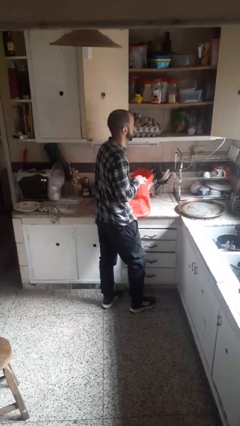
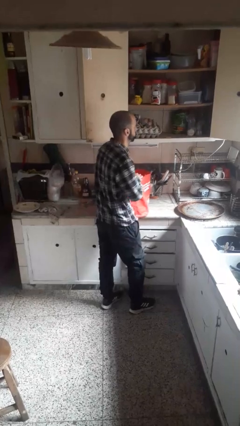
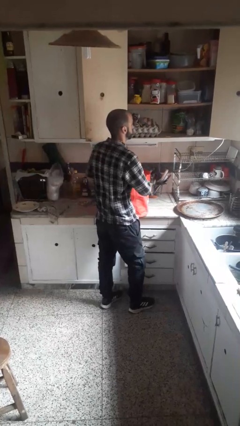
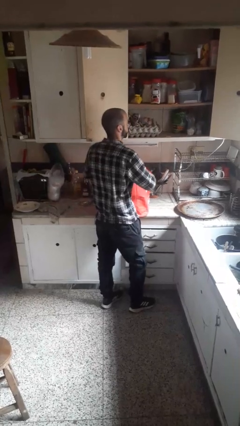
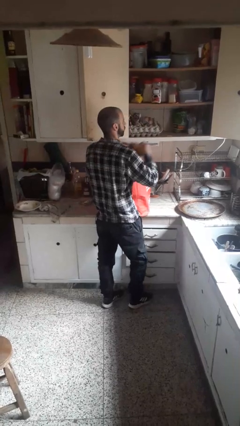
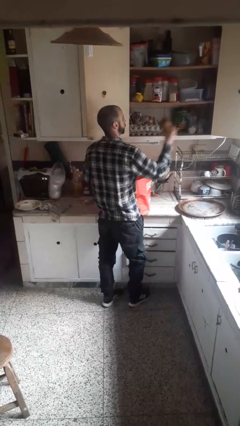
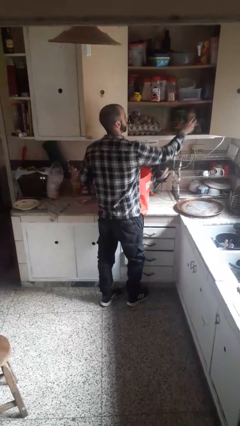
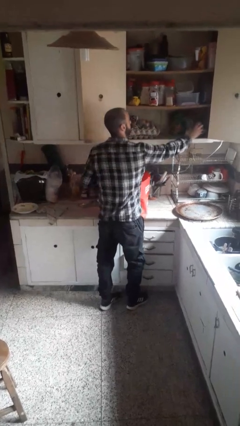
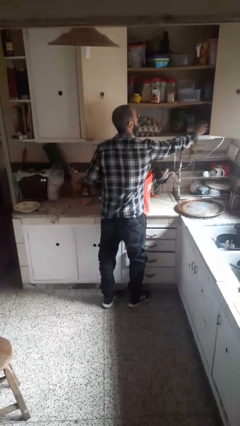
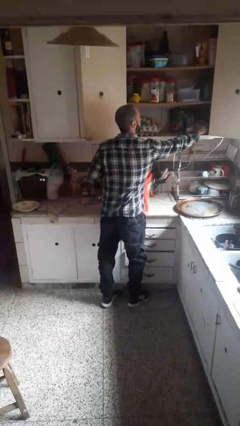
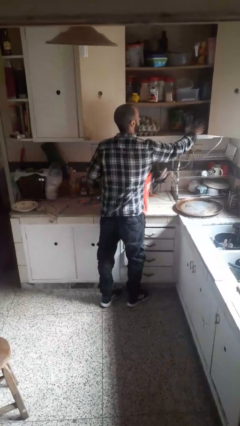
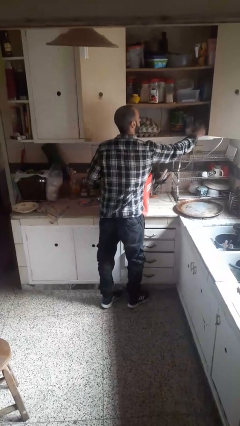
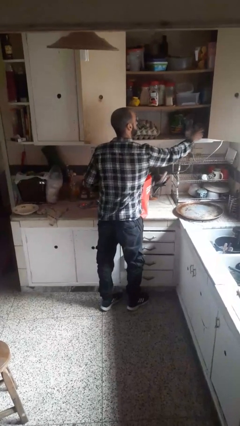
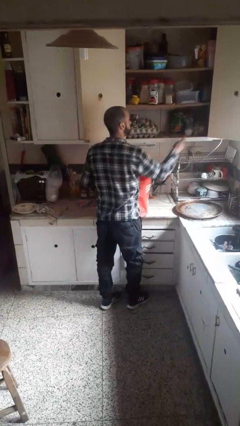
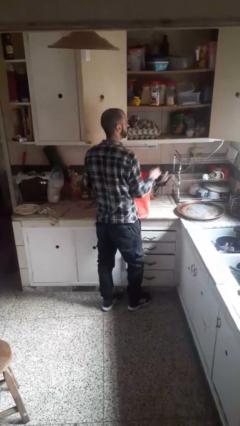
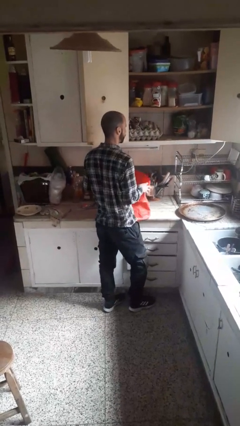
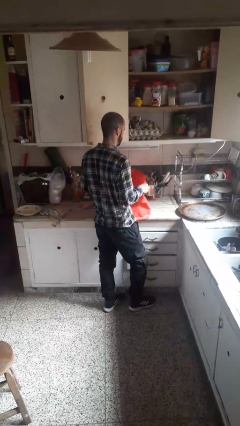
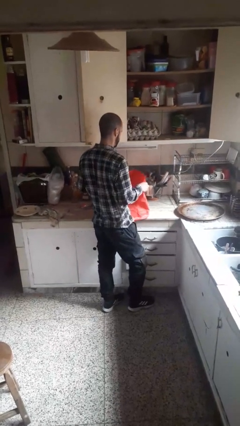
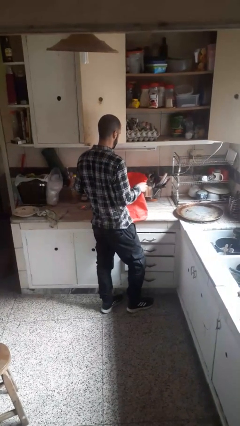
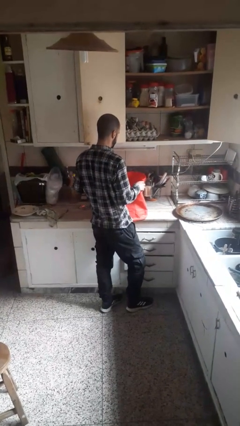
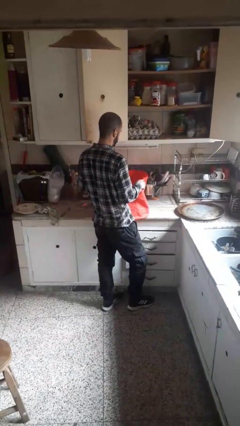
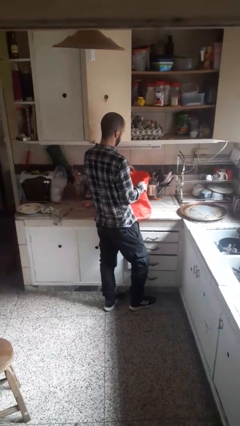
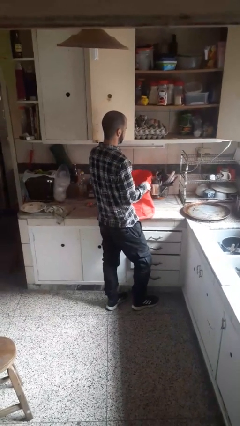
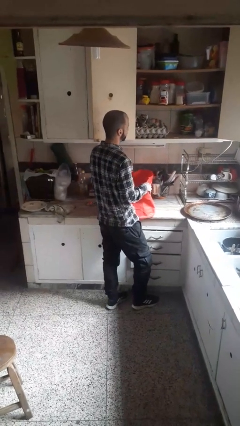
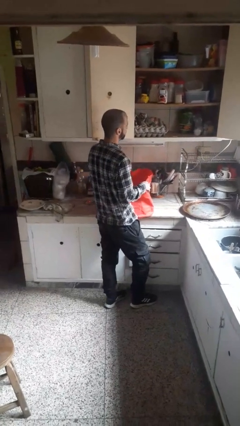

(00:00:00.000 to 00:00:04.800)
person loads groceries into cabinet

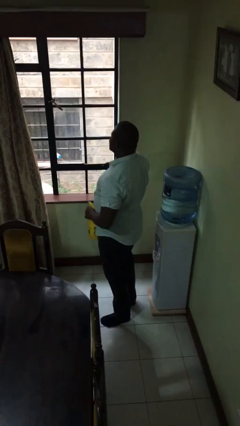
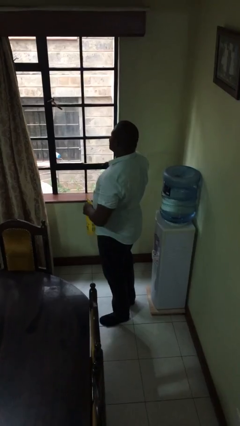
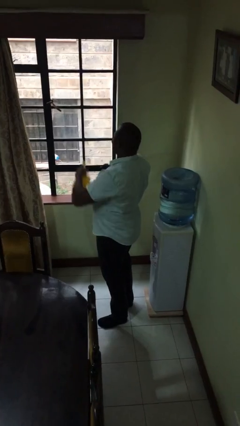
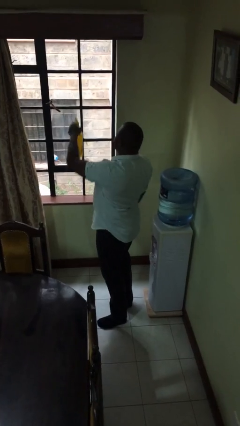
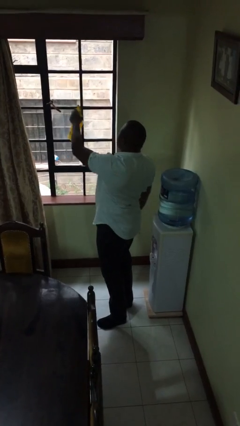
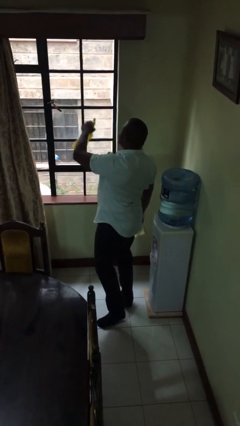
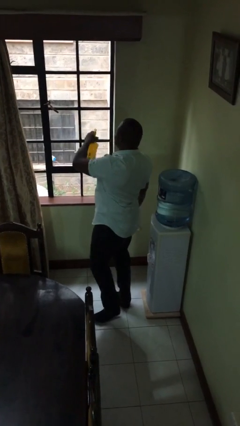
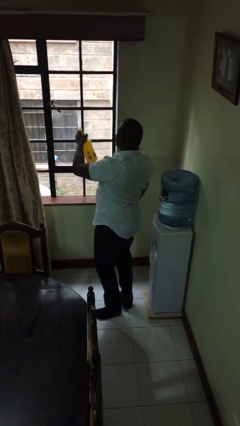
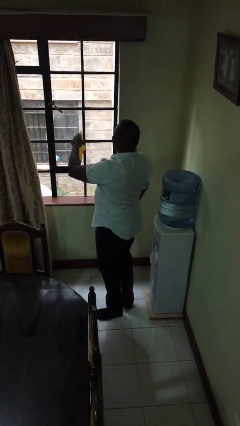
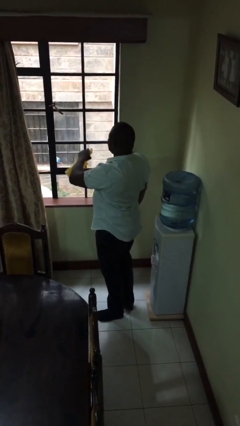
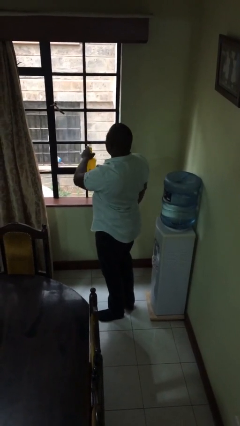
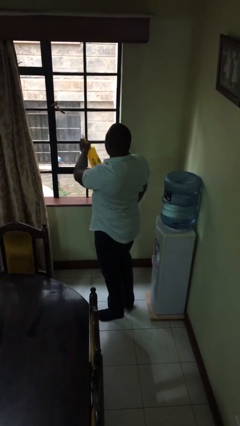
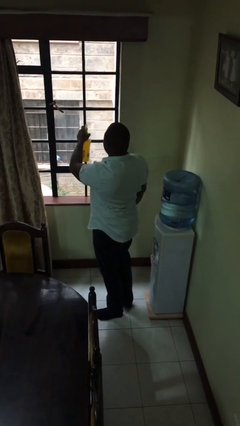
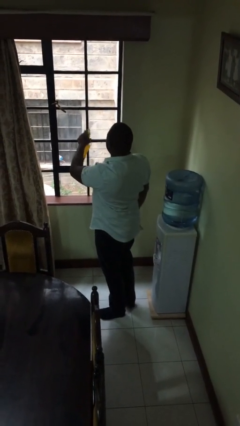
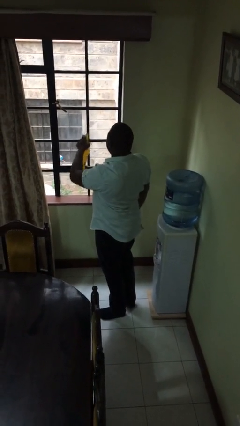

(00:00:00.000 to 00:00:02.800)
person sprays from bottle

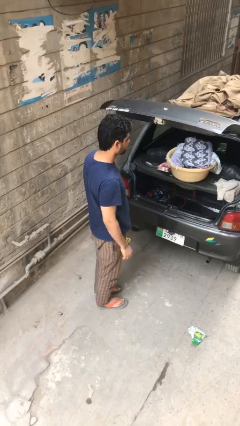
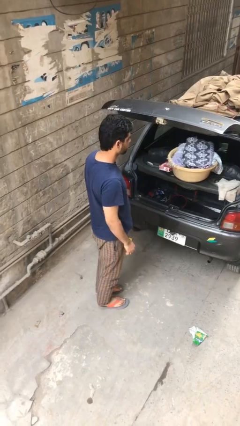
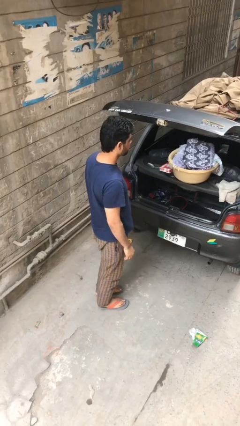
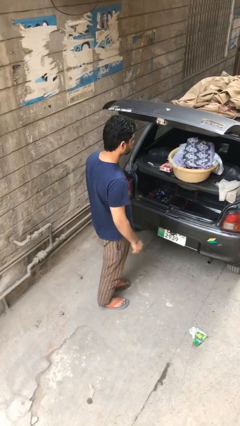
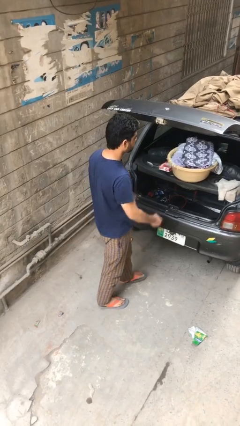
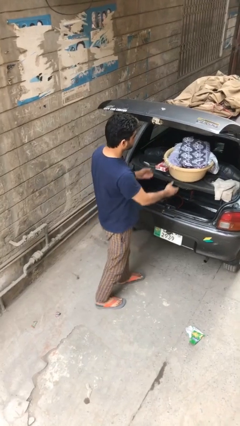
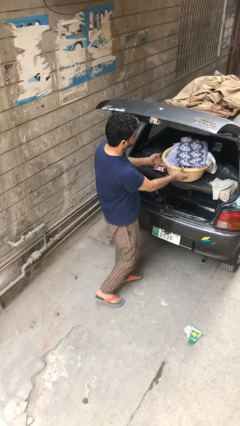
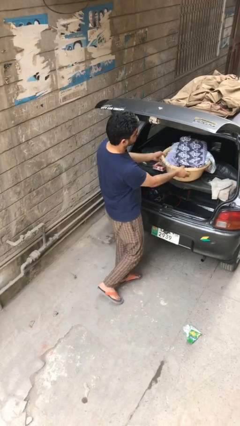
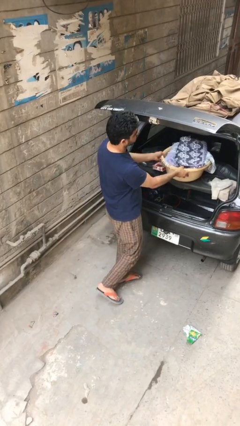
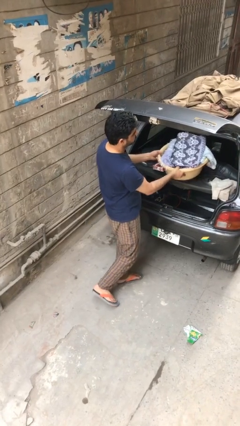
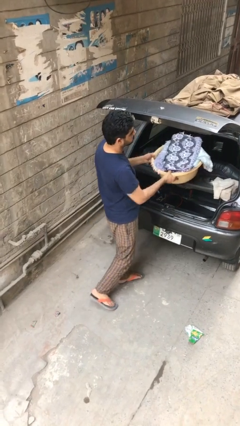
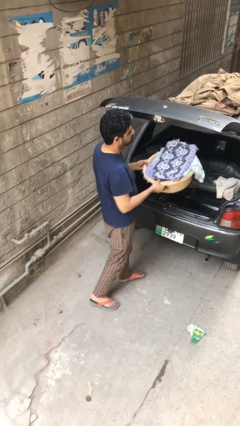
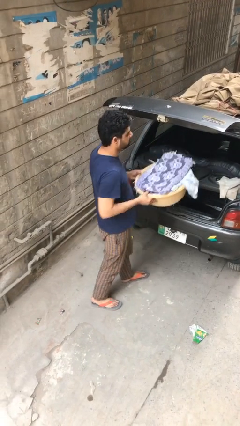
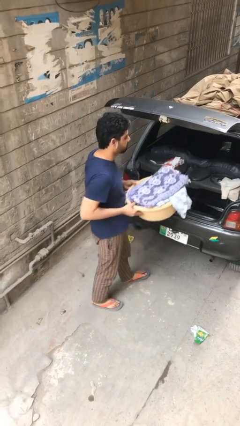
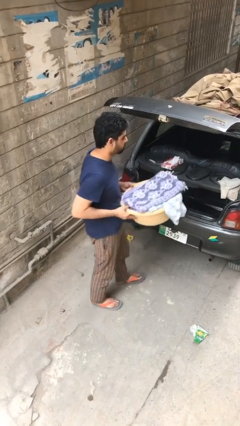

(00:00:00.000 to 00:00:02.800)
person unloads car

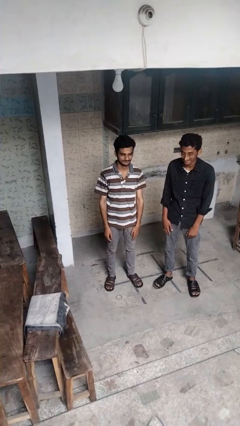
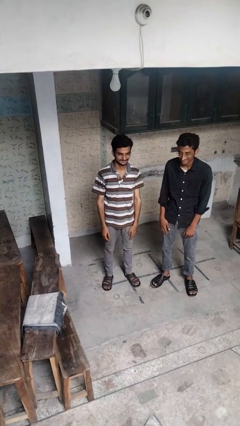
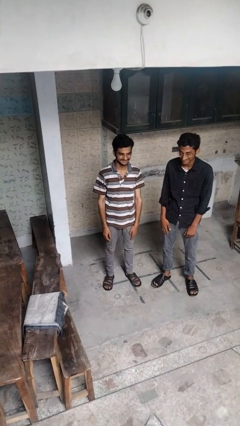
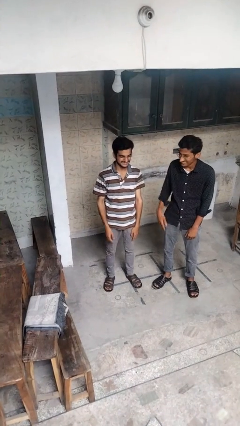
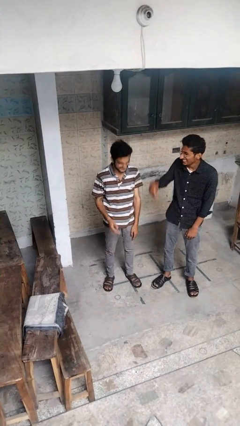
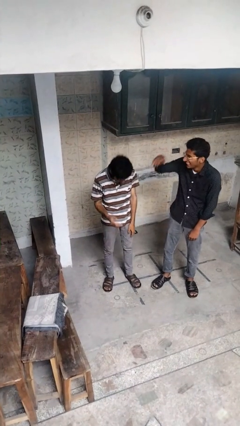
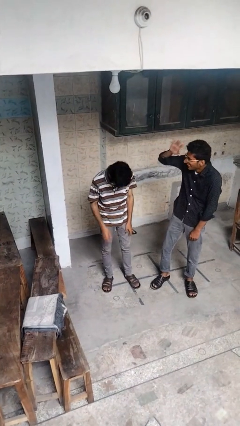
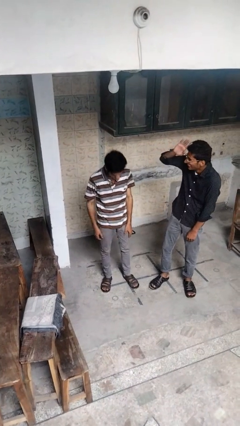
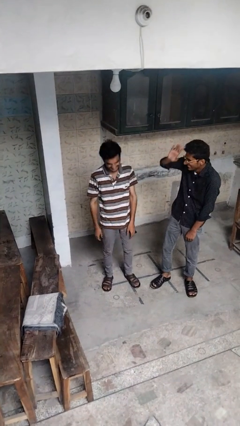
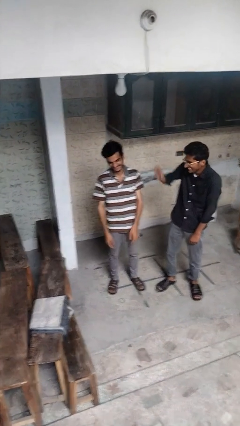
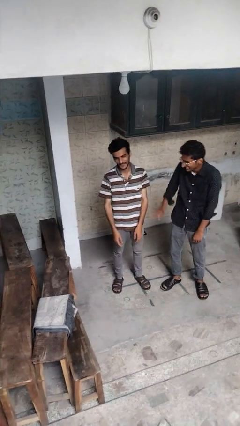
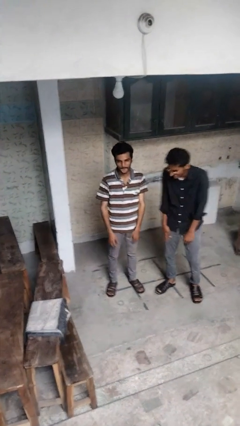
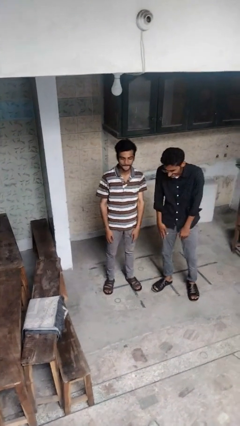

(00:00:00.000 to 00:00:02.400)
person laughs with person

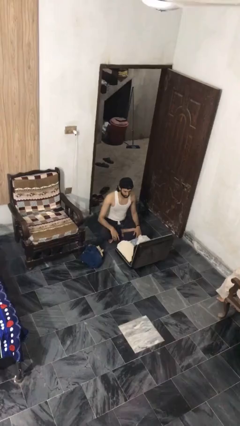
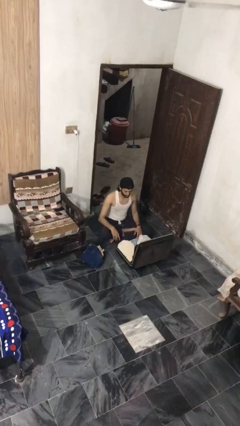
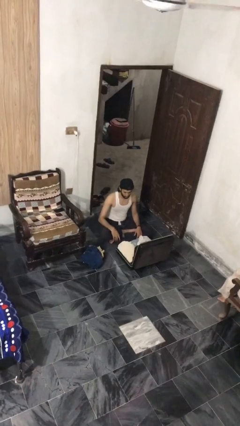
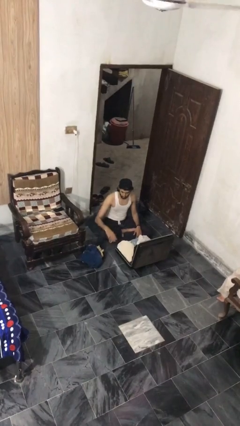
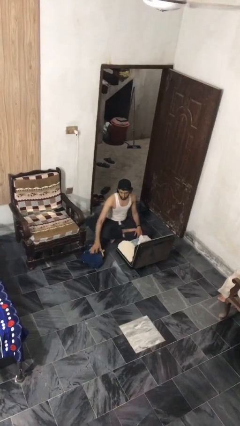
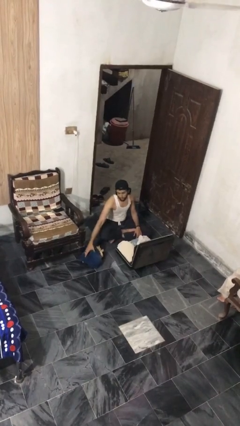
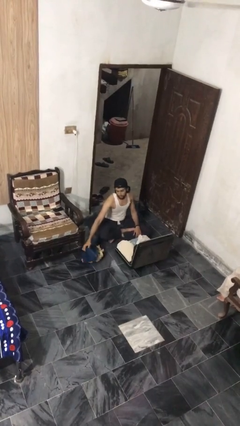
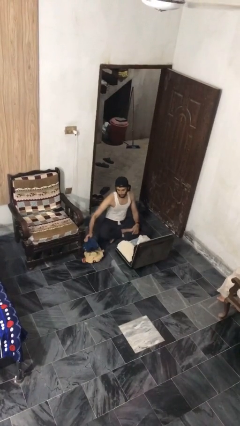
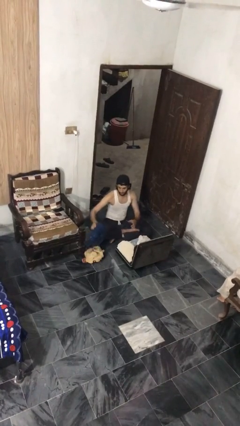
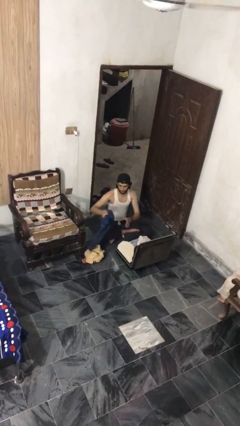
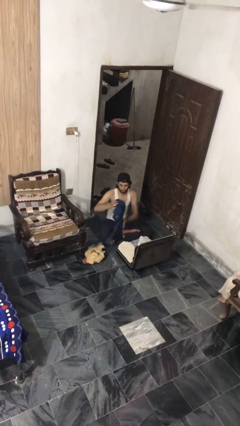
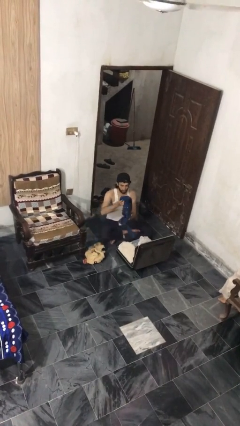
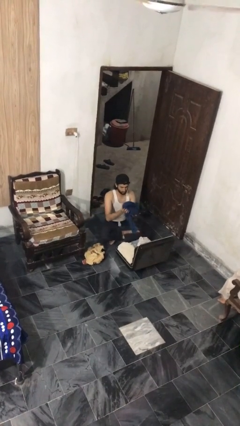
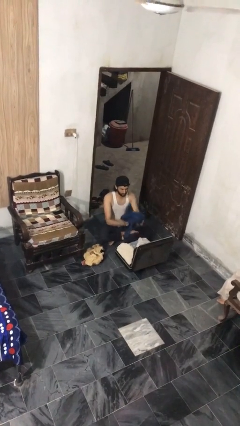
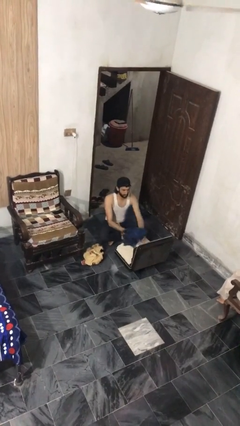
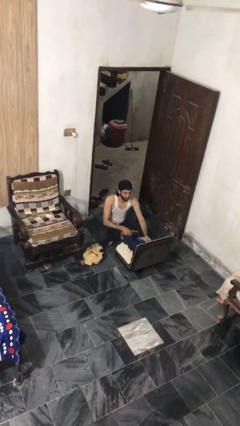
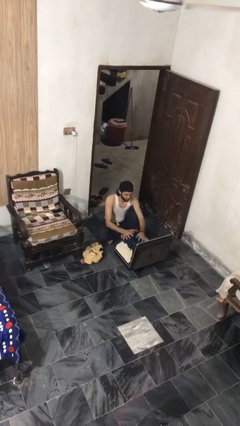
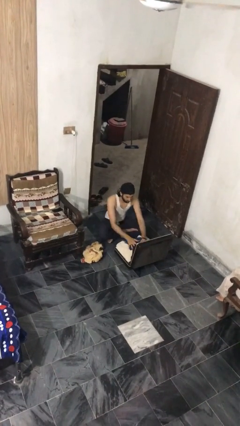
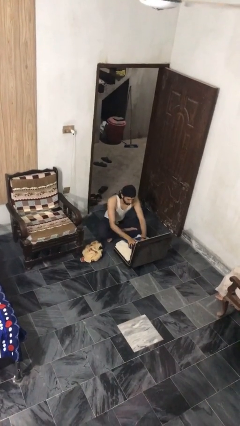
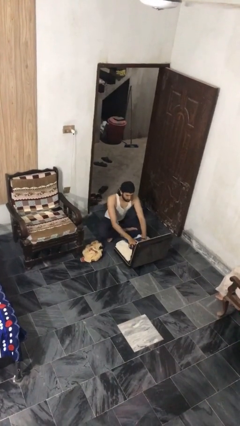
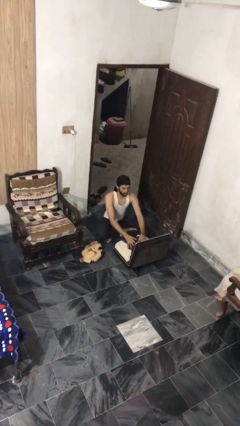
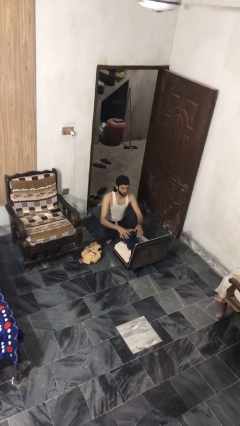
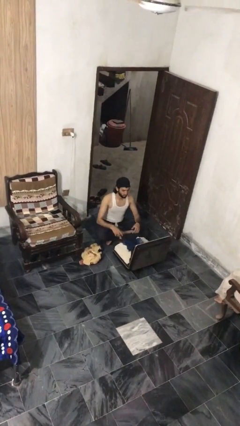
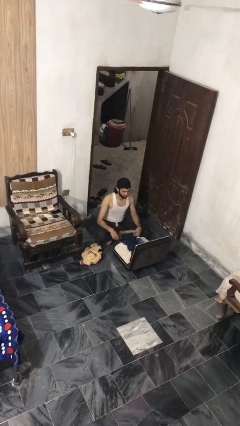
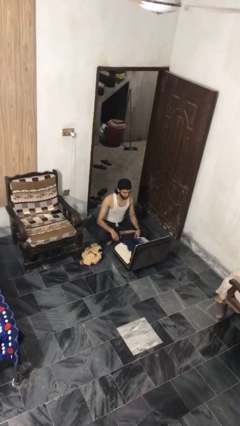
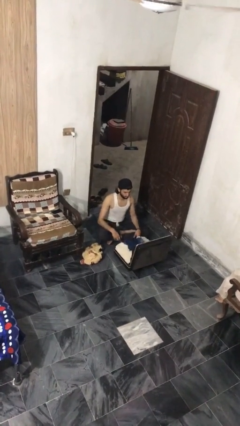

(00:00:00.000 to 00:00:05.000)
person loads clothes into suitcase
